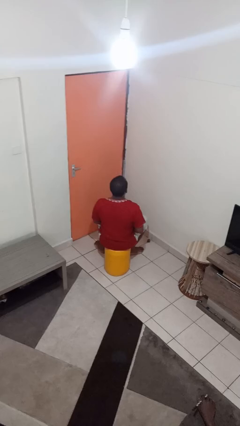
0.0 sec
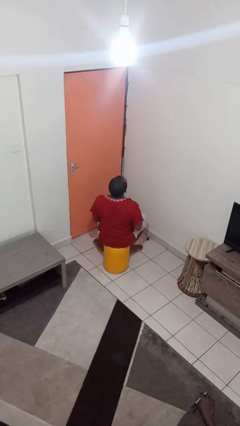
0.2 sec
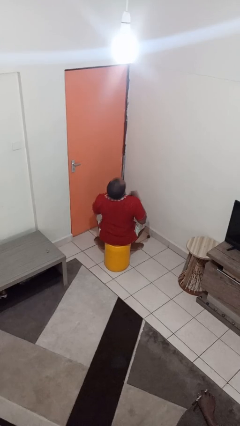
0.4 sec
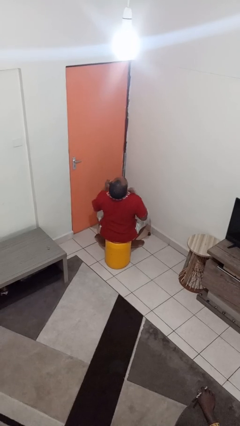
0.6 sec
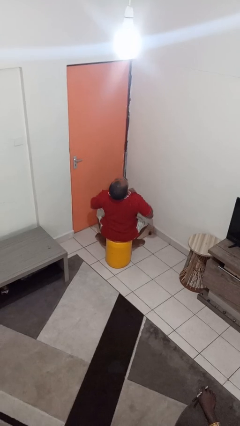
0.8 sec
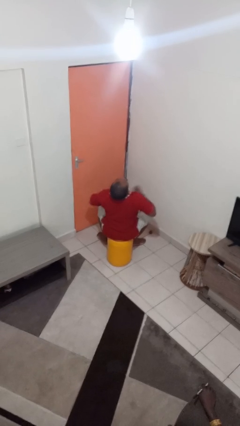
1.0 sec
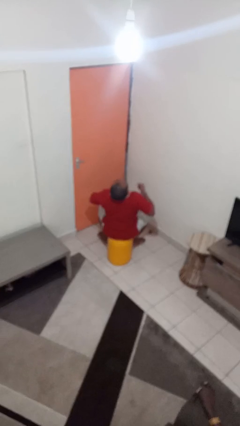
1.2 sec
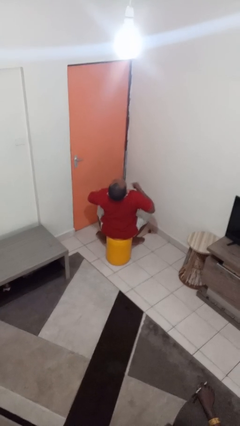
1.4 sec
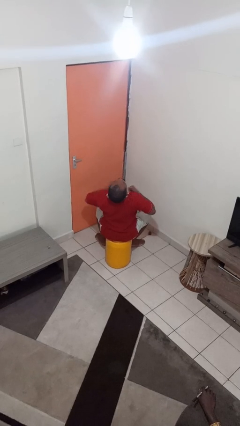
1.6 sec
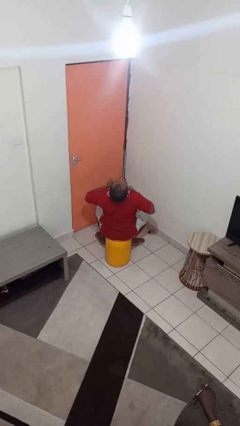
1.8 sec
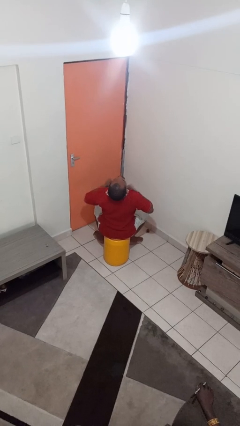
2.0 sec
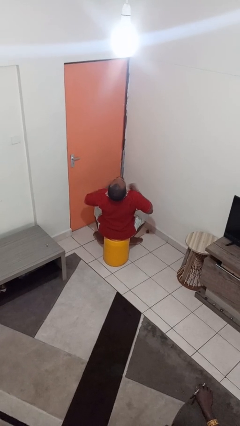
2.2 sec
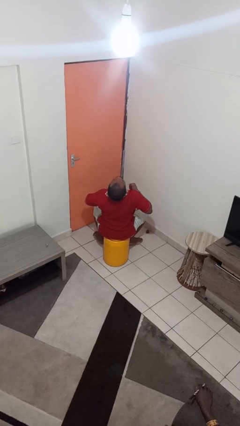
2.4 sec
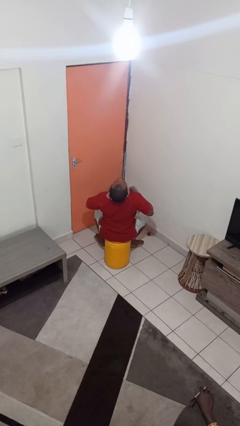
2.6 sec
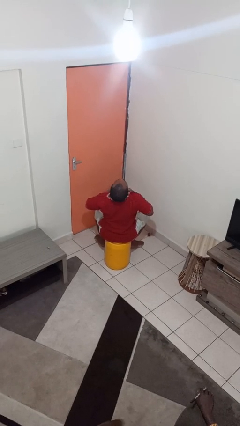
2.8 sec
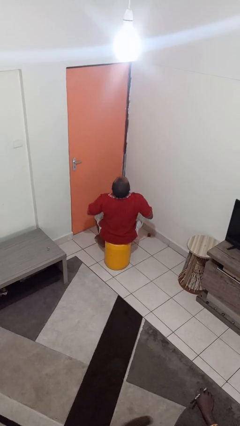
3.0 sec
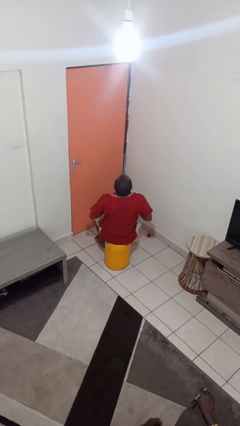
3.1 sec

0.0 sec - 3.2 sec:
person drums on chest

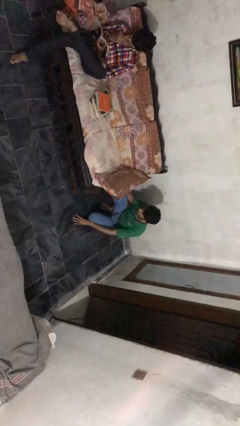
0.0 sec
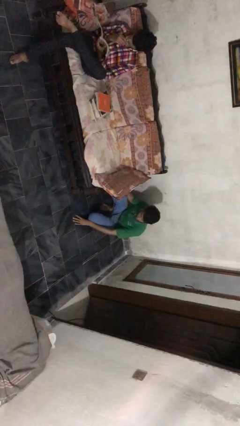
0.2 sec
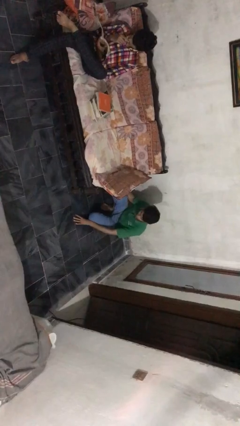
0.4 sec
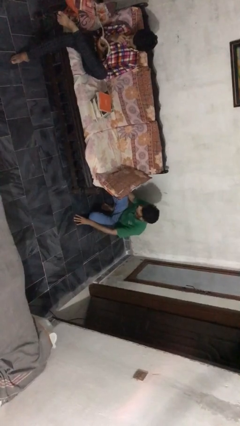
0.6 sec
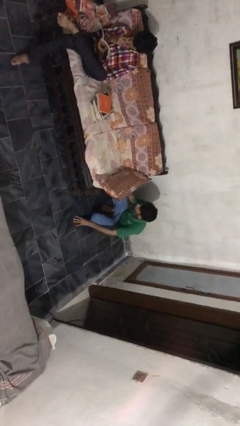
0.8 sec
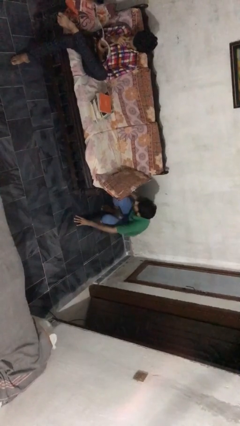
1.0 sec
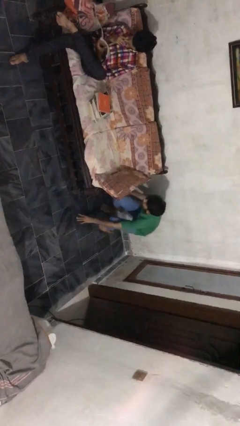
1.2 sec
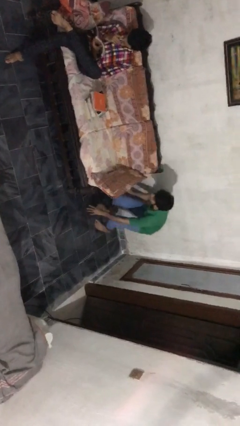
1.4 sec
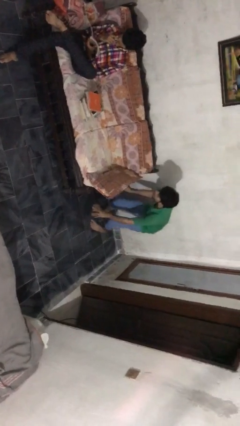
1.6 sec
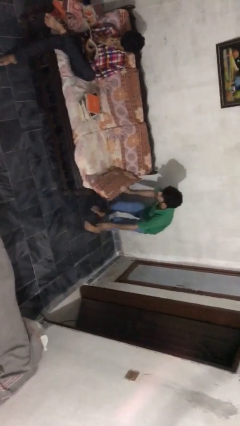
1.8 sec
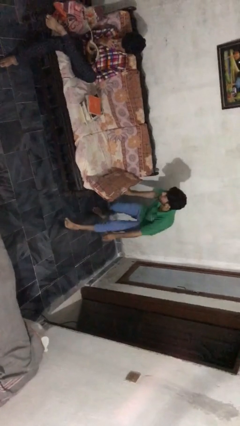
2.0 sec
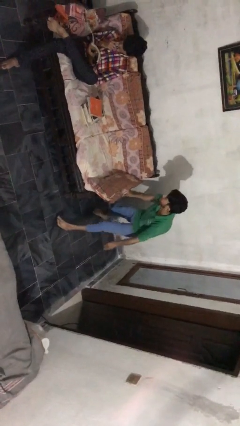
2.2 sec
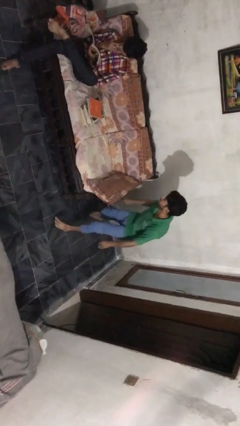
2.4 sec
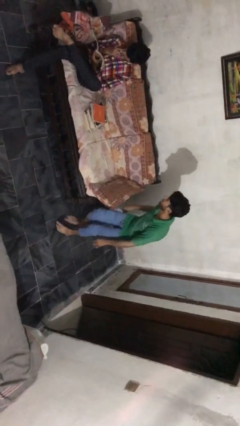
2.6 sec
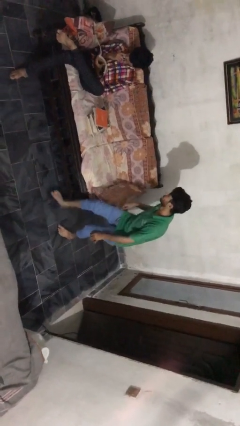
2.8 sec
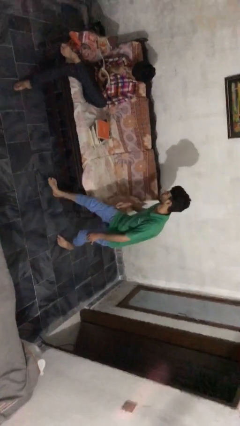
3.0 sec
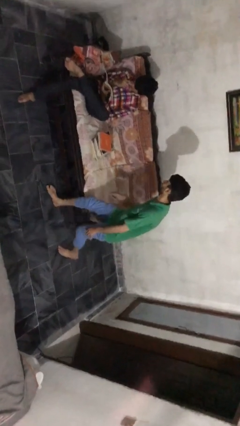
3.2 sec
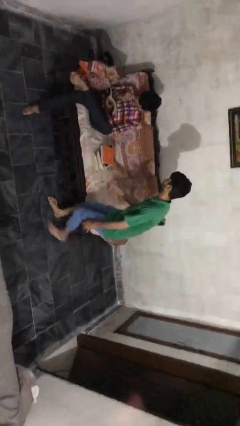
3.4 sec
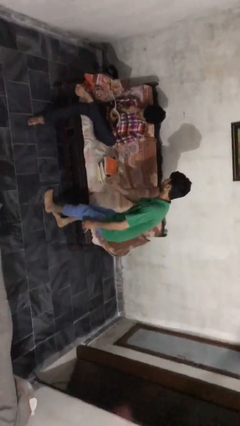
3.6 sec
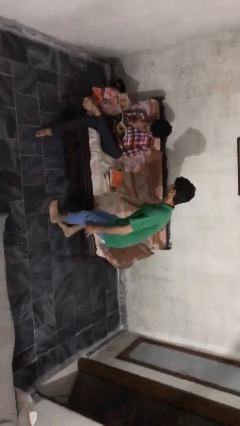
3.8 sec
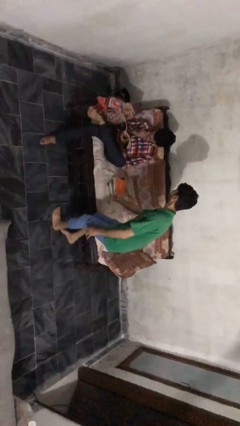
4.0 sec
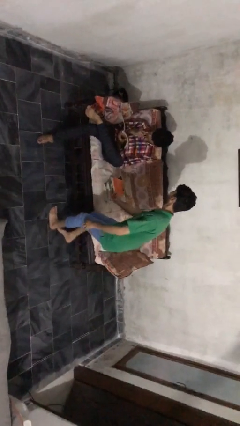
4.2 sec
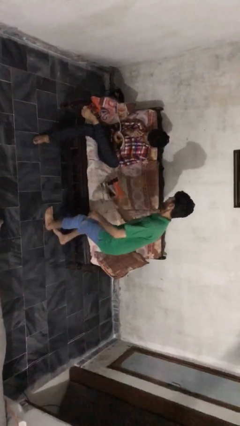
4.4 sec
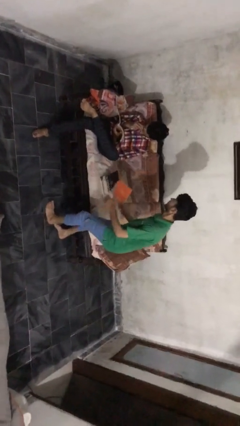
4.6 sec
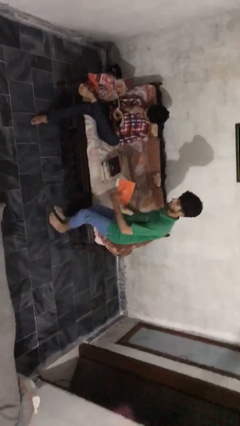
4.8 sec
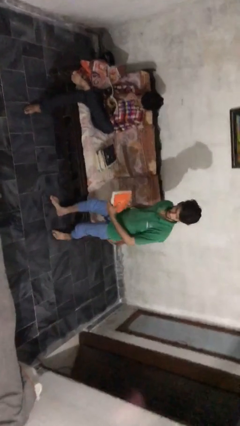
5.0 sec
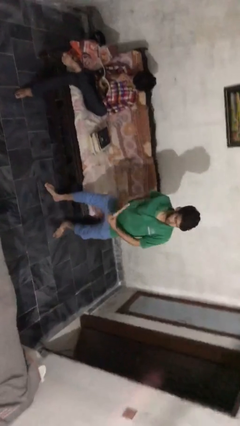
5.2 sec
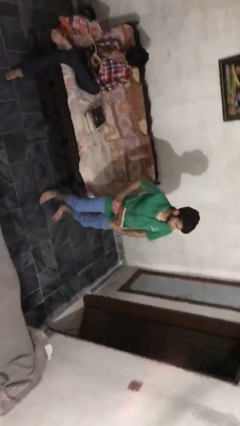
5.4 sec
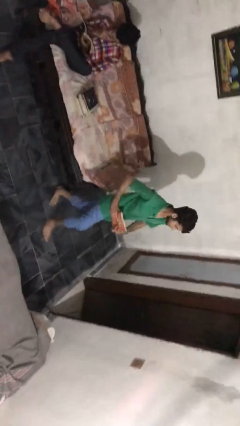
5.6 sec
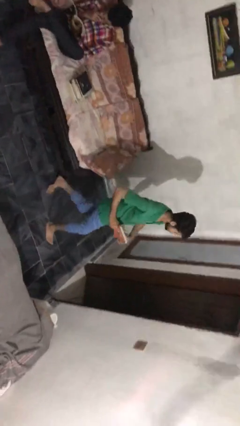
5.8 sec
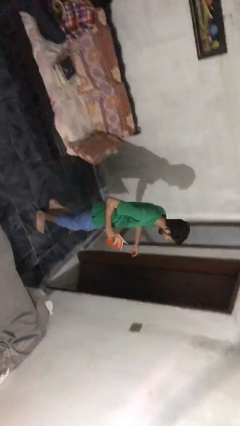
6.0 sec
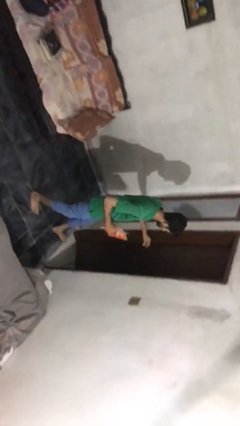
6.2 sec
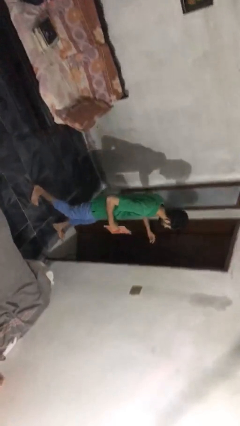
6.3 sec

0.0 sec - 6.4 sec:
person steals object from person

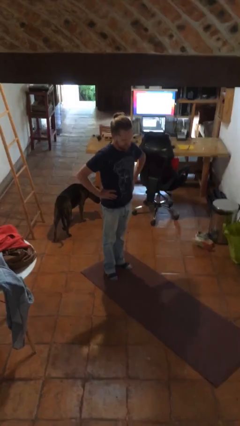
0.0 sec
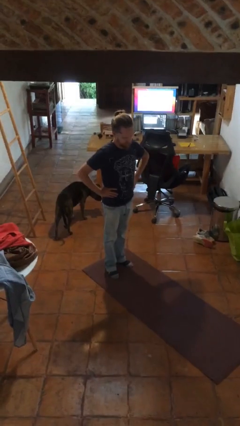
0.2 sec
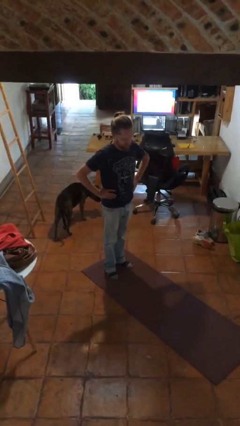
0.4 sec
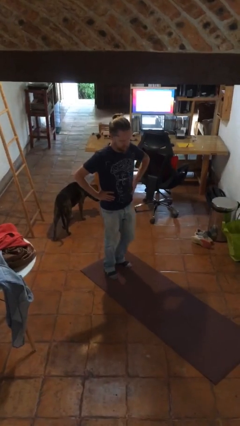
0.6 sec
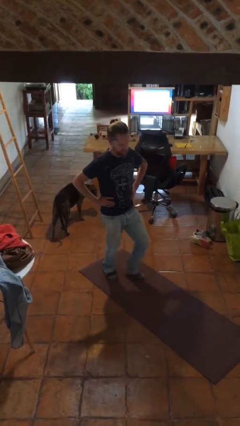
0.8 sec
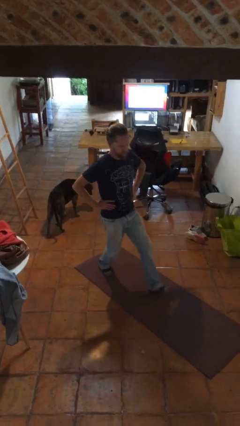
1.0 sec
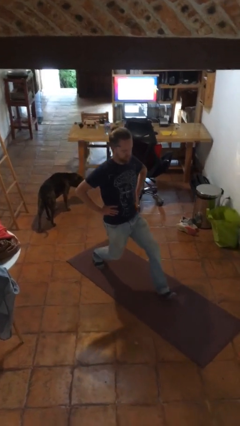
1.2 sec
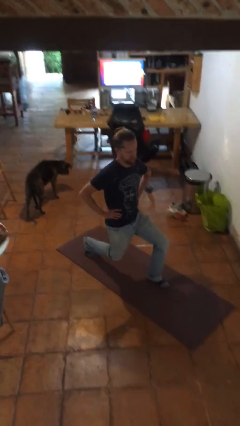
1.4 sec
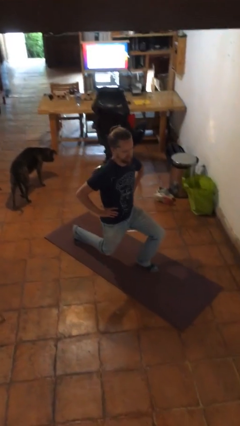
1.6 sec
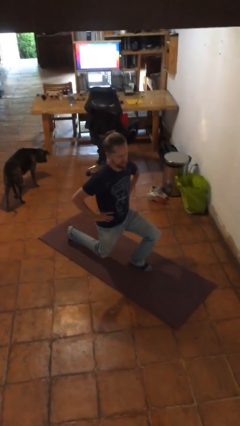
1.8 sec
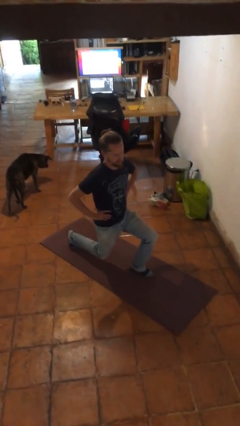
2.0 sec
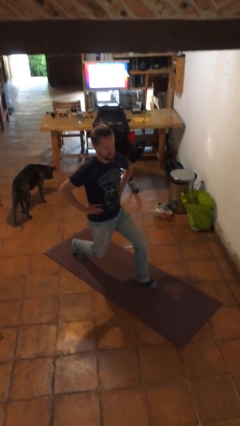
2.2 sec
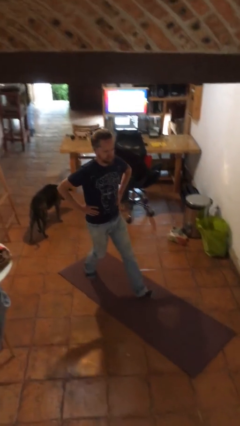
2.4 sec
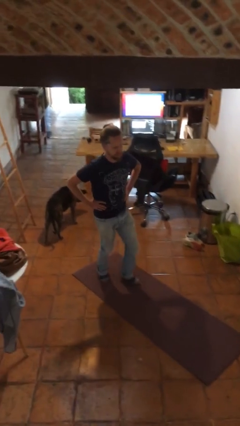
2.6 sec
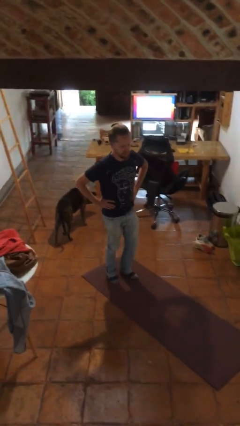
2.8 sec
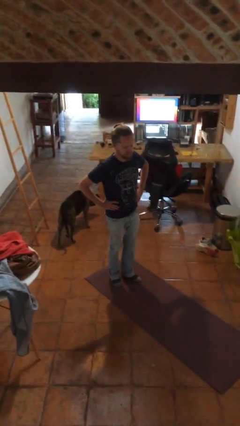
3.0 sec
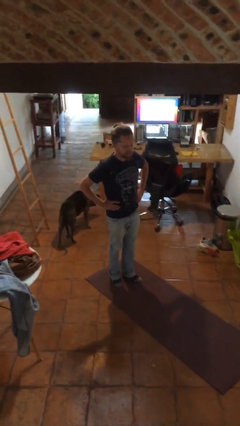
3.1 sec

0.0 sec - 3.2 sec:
person exercises with lunges

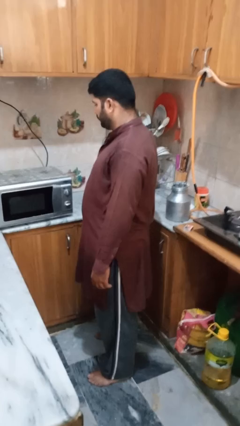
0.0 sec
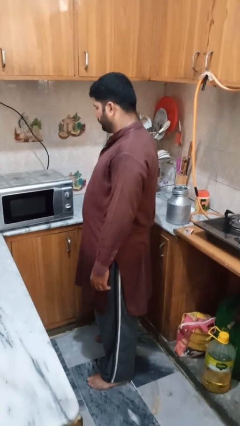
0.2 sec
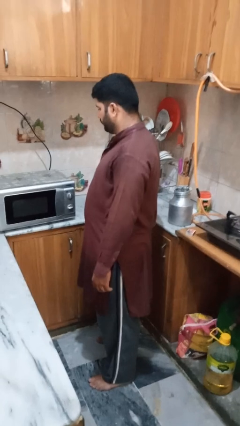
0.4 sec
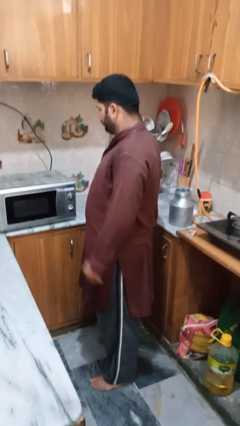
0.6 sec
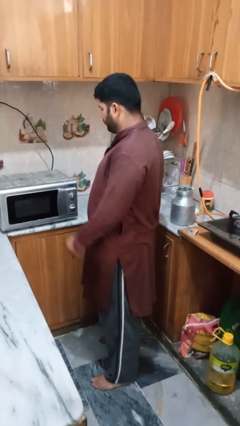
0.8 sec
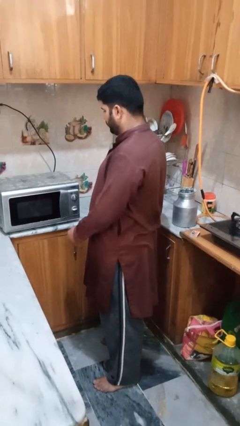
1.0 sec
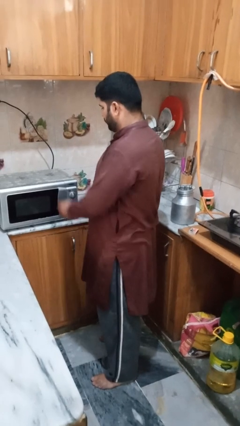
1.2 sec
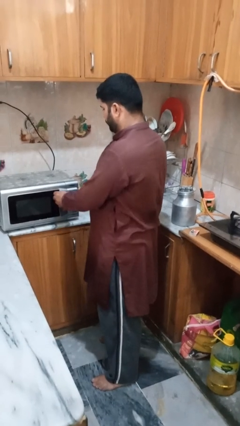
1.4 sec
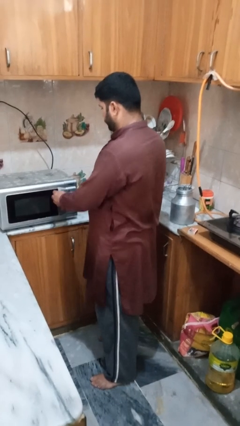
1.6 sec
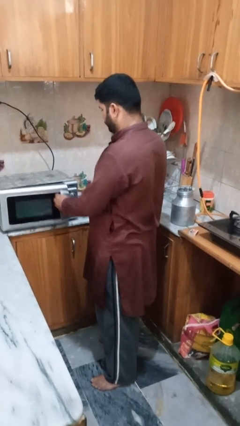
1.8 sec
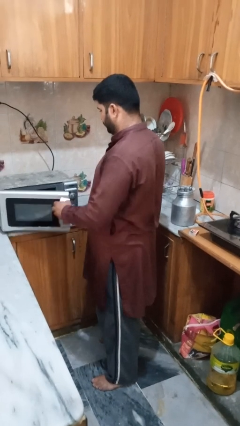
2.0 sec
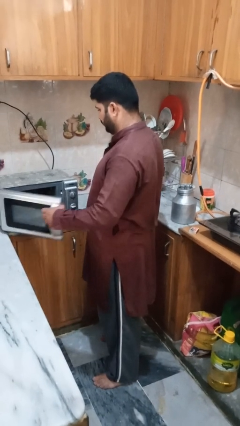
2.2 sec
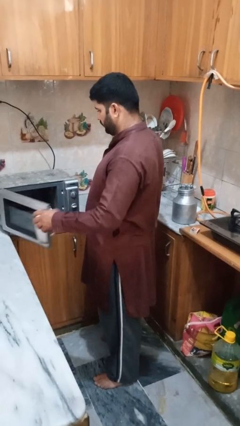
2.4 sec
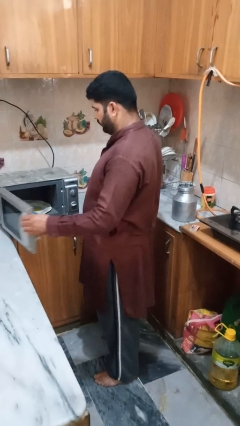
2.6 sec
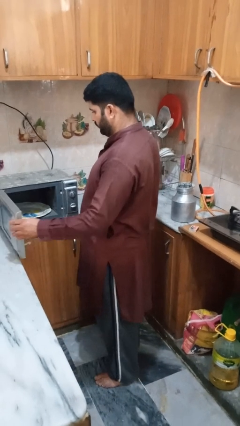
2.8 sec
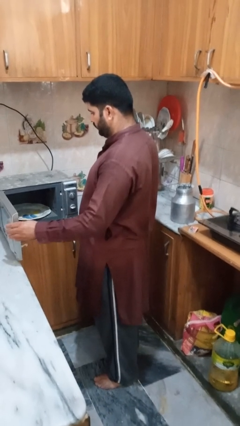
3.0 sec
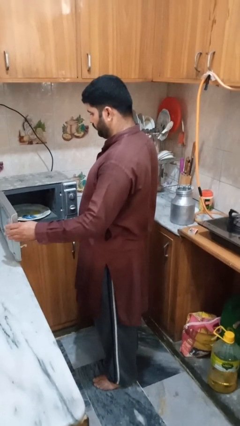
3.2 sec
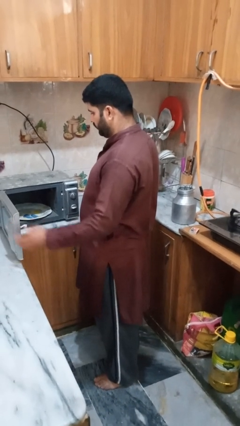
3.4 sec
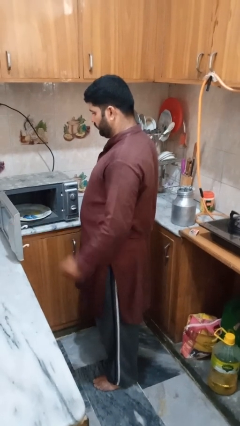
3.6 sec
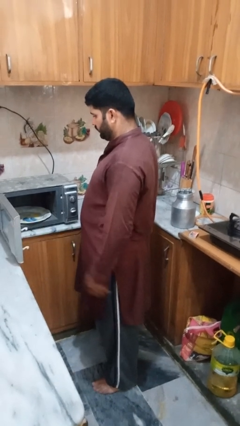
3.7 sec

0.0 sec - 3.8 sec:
person opens oven door

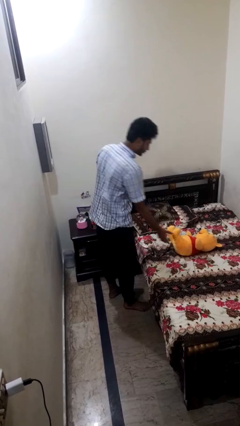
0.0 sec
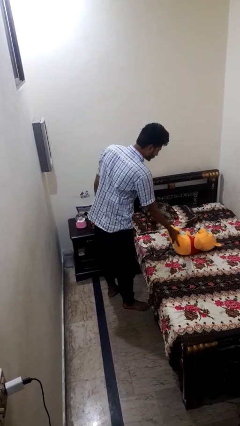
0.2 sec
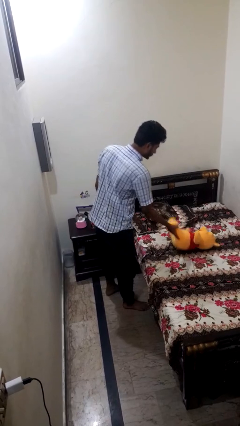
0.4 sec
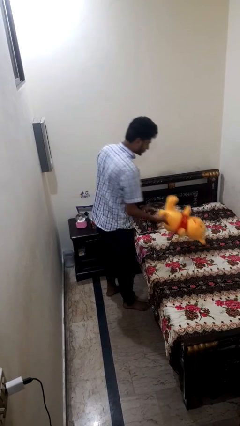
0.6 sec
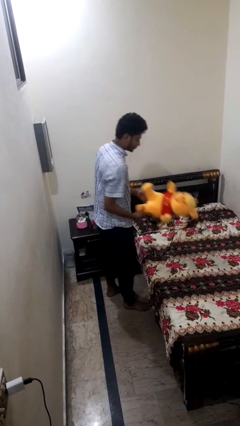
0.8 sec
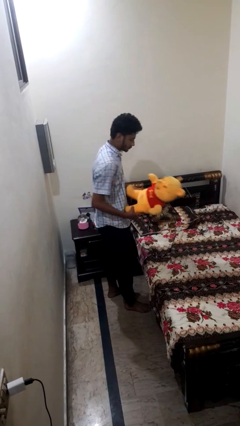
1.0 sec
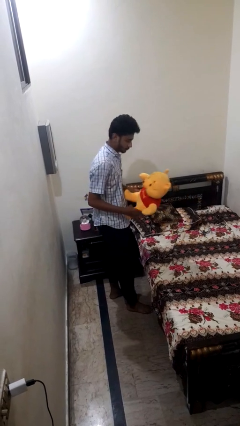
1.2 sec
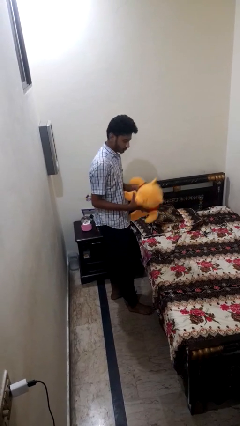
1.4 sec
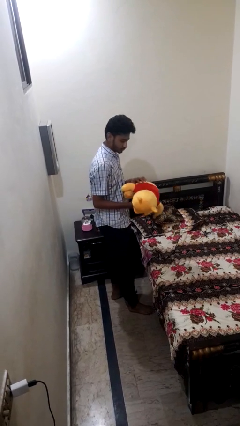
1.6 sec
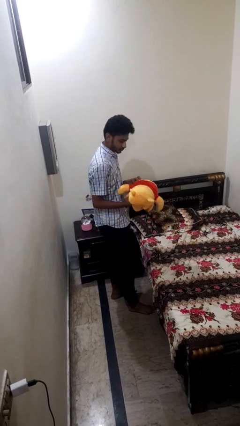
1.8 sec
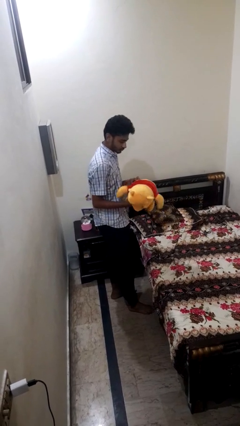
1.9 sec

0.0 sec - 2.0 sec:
person picks up object from bed
